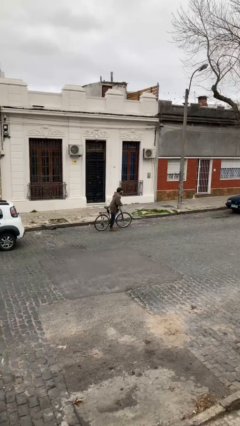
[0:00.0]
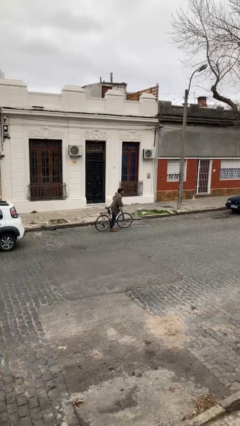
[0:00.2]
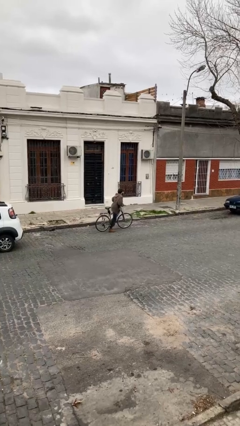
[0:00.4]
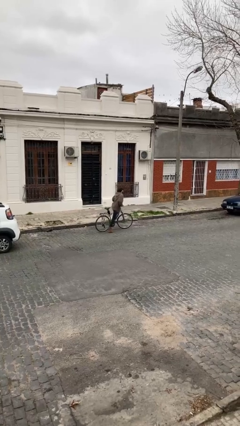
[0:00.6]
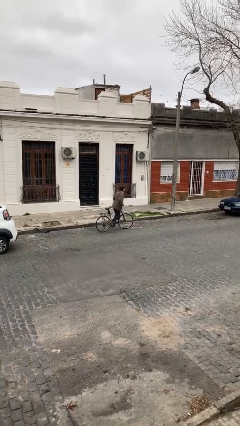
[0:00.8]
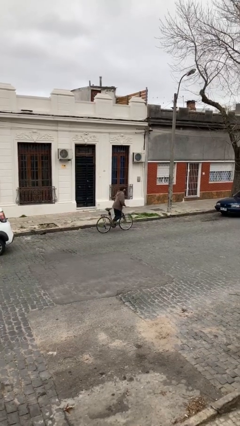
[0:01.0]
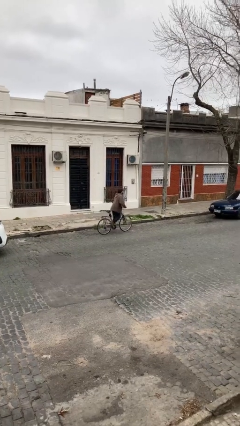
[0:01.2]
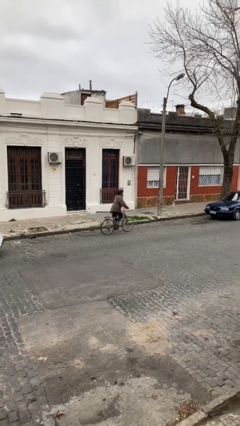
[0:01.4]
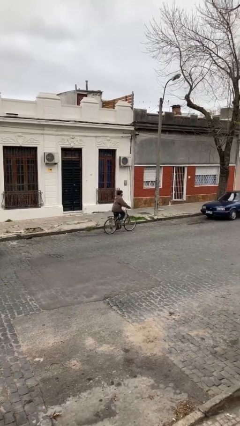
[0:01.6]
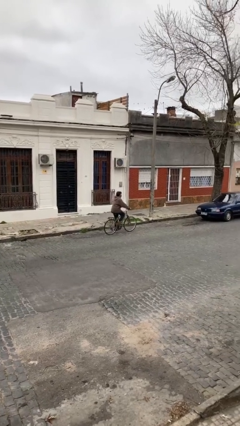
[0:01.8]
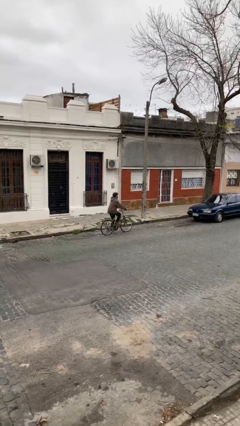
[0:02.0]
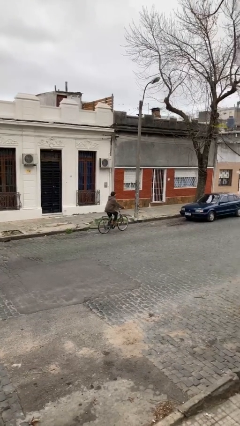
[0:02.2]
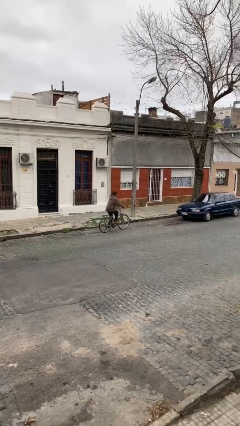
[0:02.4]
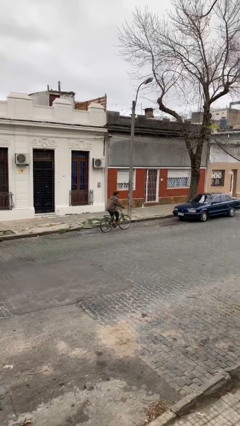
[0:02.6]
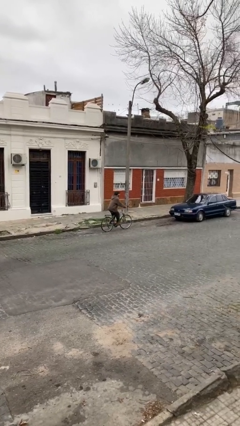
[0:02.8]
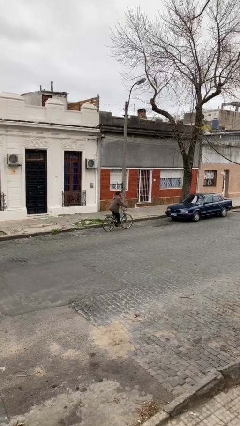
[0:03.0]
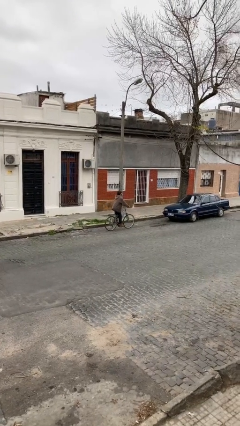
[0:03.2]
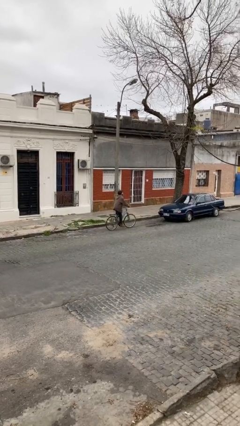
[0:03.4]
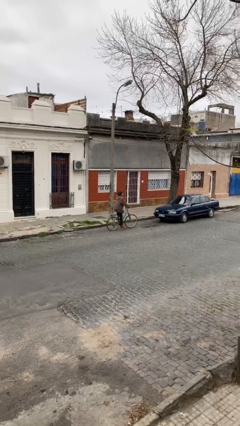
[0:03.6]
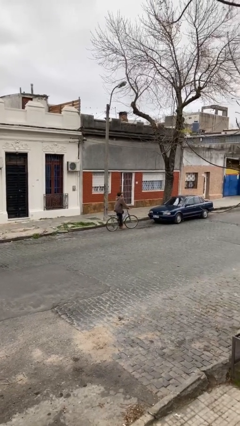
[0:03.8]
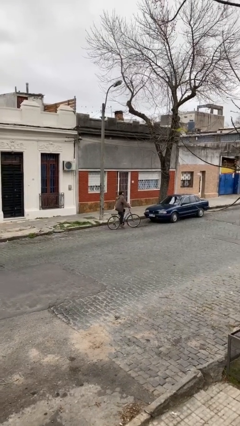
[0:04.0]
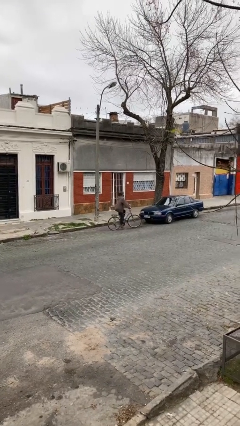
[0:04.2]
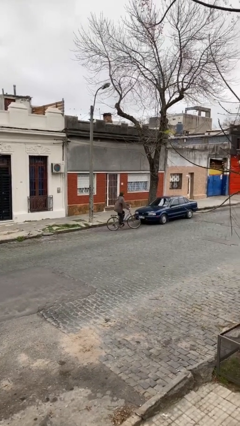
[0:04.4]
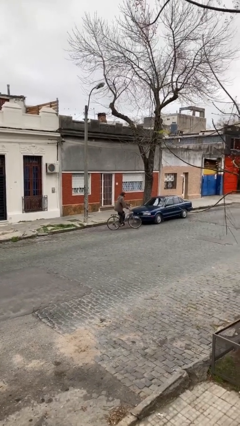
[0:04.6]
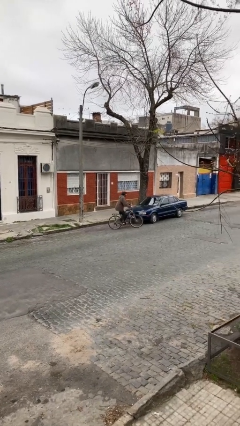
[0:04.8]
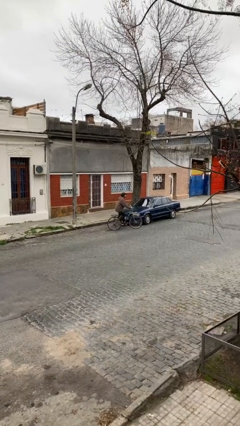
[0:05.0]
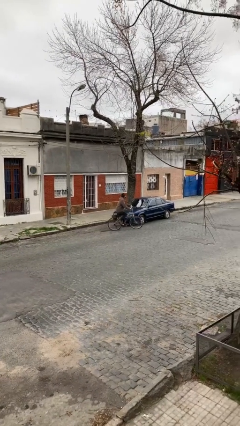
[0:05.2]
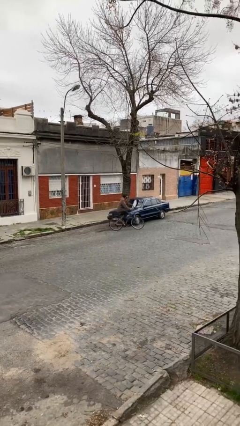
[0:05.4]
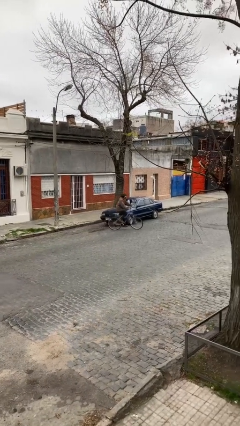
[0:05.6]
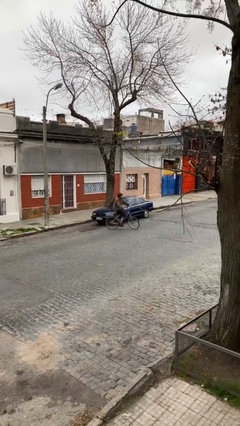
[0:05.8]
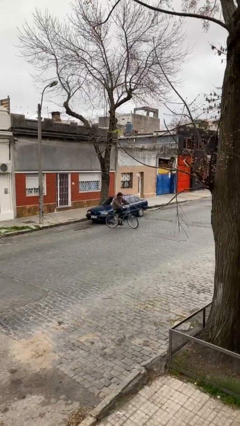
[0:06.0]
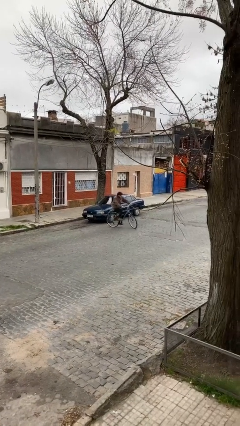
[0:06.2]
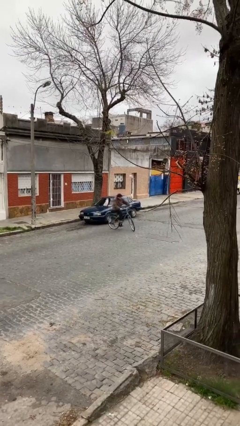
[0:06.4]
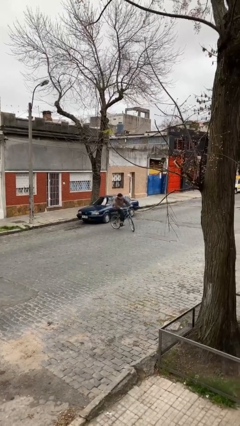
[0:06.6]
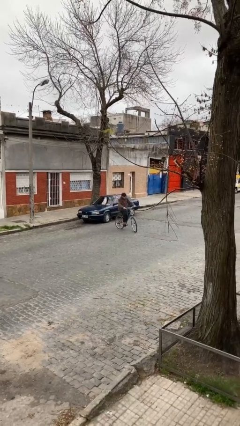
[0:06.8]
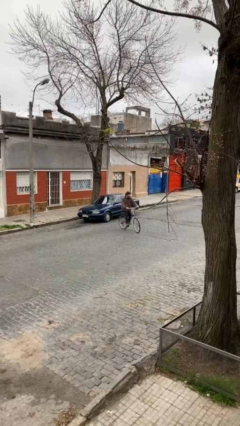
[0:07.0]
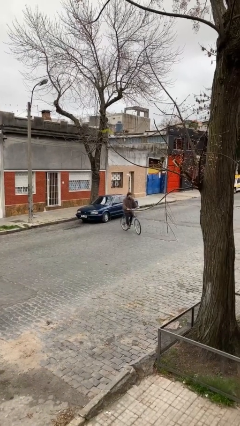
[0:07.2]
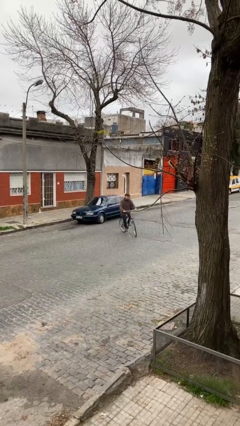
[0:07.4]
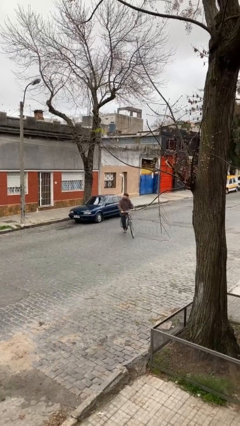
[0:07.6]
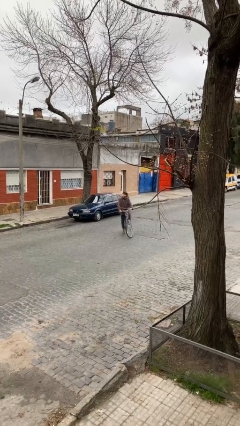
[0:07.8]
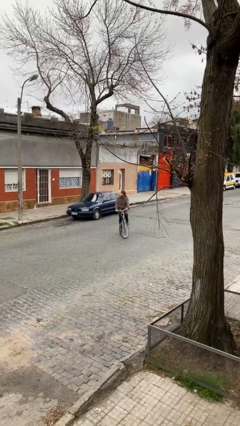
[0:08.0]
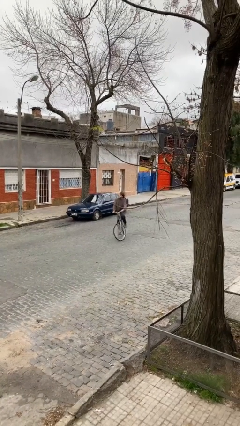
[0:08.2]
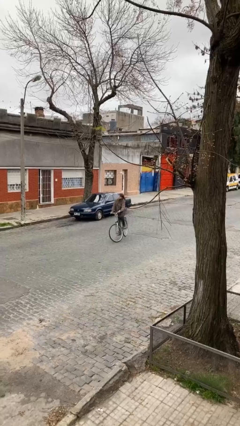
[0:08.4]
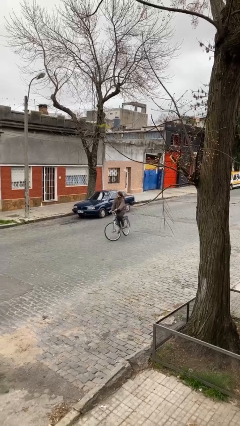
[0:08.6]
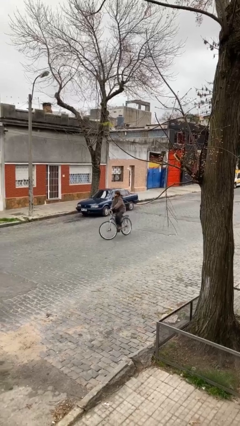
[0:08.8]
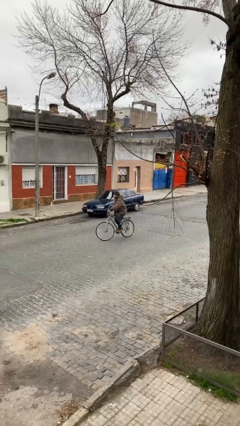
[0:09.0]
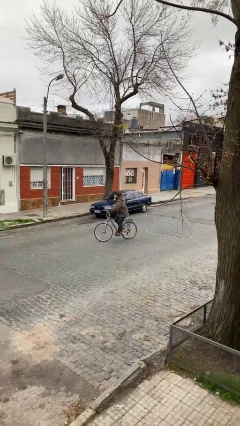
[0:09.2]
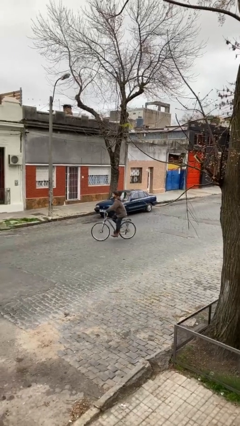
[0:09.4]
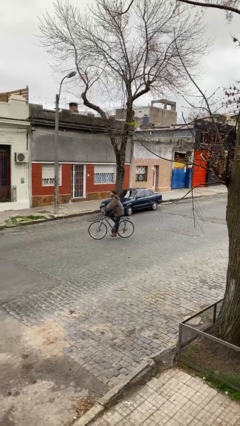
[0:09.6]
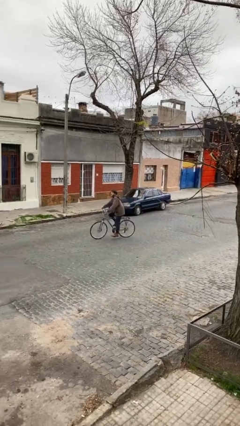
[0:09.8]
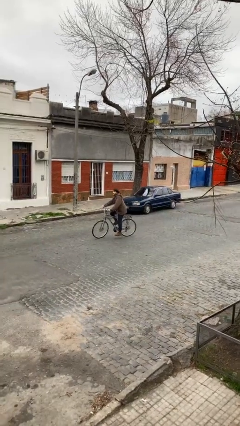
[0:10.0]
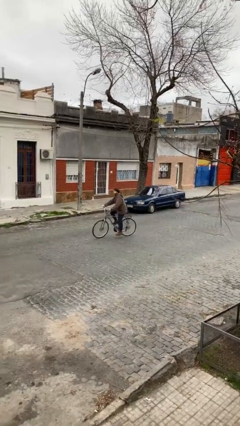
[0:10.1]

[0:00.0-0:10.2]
person rides bicycle

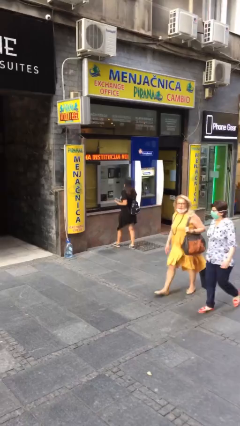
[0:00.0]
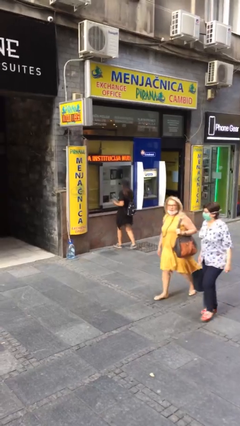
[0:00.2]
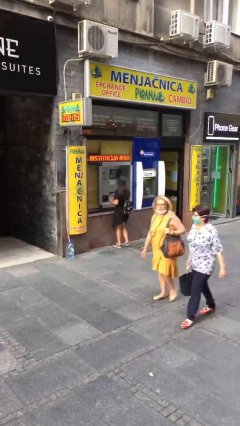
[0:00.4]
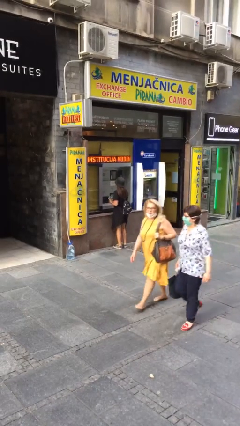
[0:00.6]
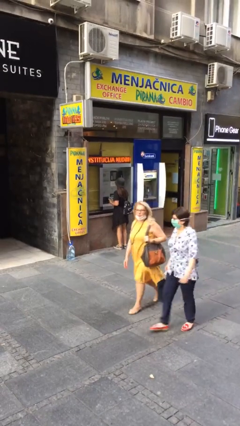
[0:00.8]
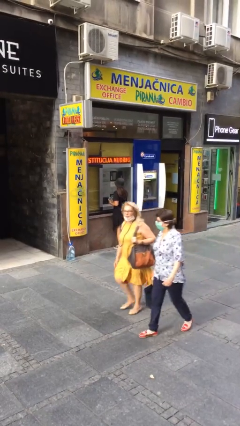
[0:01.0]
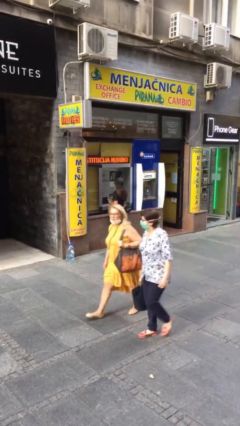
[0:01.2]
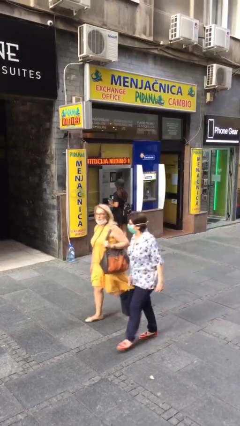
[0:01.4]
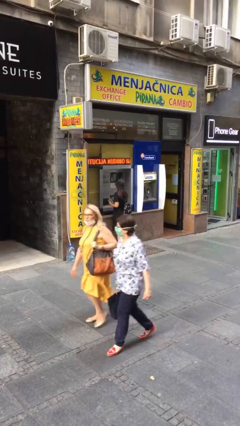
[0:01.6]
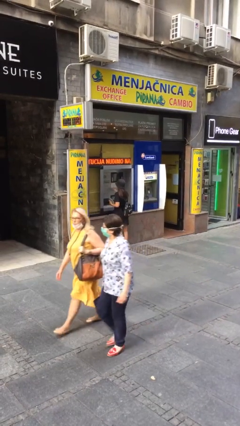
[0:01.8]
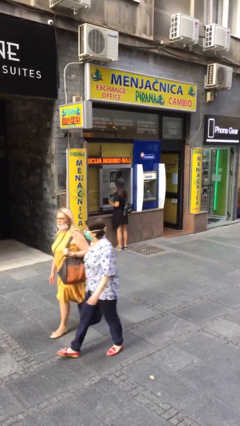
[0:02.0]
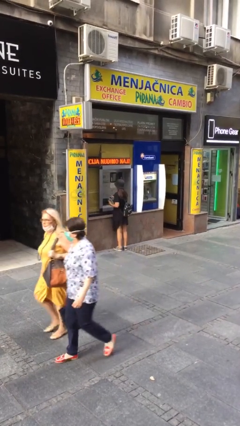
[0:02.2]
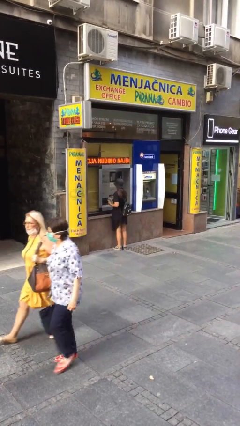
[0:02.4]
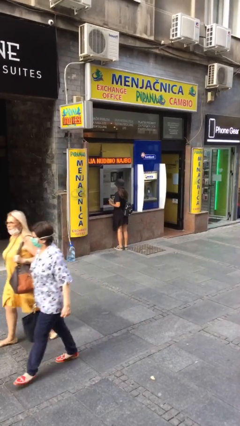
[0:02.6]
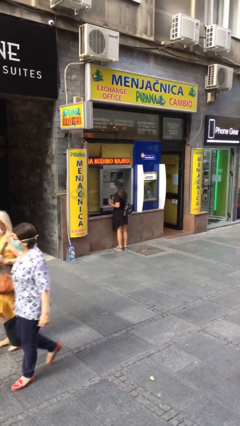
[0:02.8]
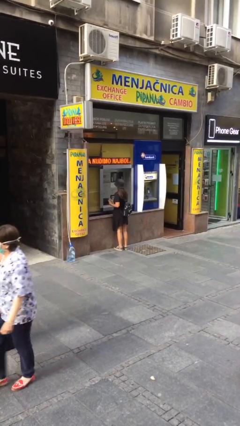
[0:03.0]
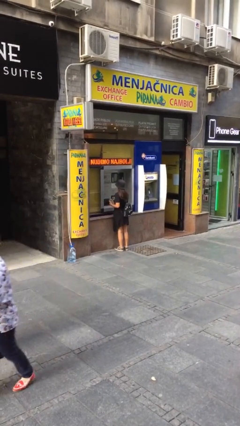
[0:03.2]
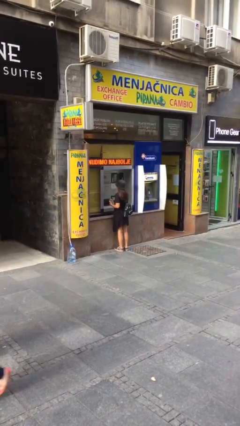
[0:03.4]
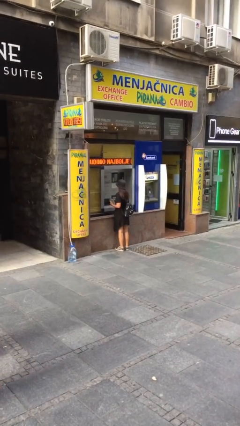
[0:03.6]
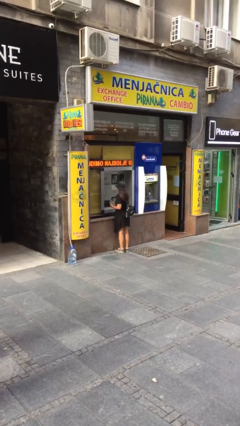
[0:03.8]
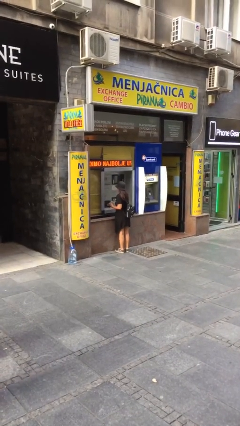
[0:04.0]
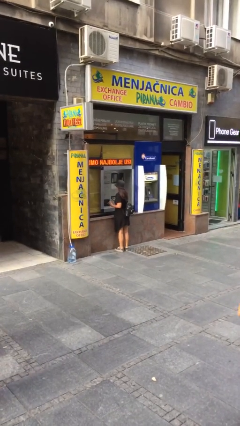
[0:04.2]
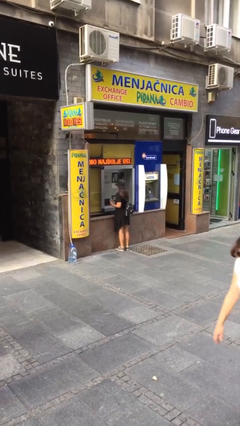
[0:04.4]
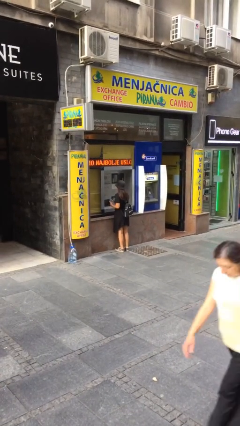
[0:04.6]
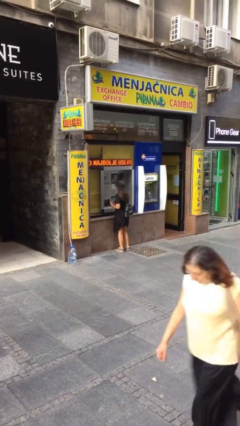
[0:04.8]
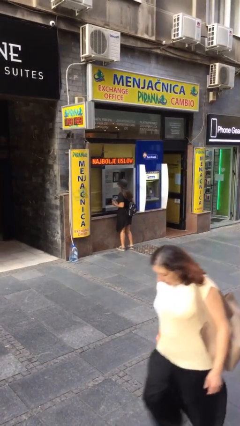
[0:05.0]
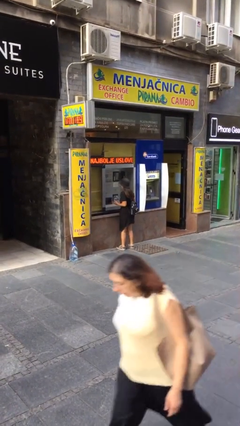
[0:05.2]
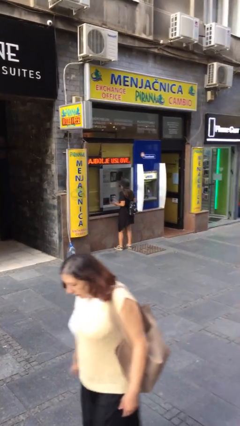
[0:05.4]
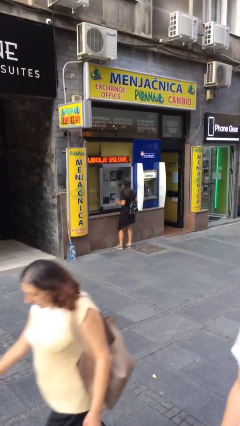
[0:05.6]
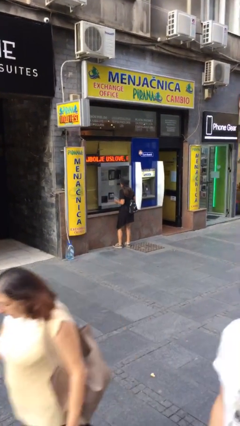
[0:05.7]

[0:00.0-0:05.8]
person purchases from machine

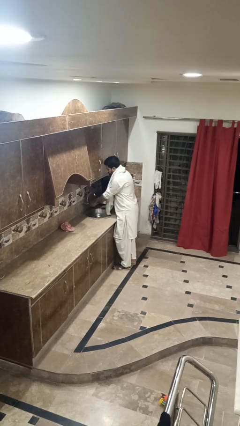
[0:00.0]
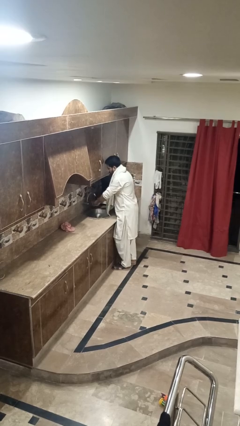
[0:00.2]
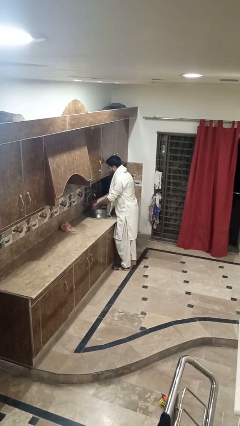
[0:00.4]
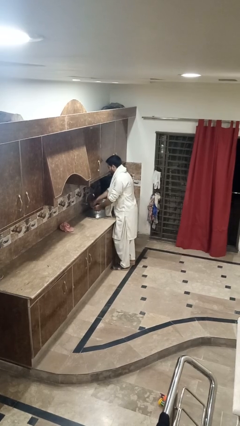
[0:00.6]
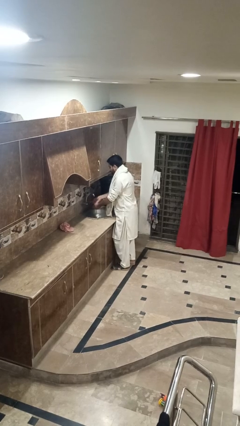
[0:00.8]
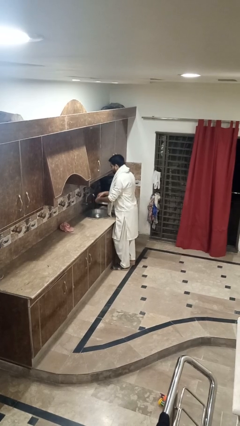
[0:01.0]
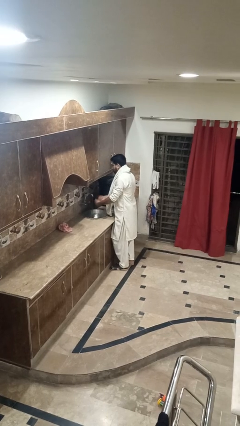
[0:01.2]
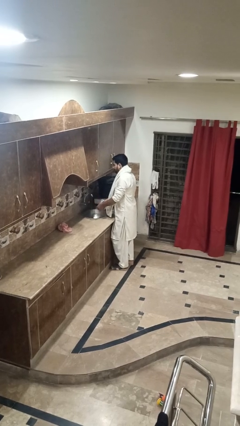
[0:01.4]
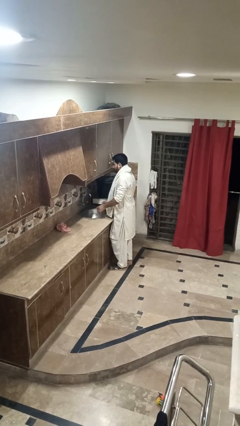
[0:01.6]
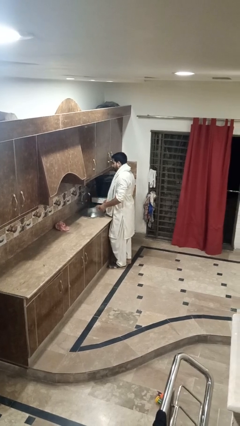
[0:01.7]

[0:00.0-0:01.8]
person washes hands

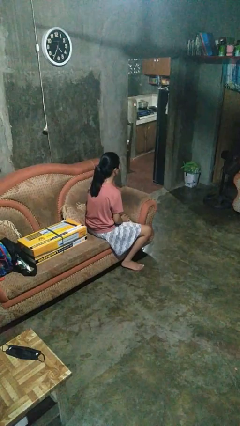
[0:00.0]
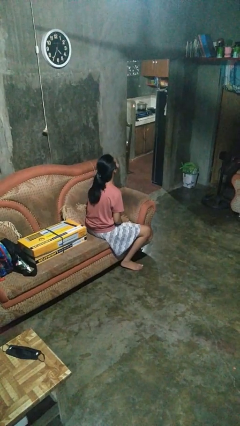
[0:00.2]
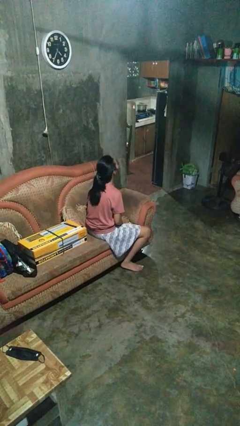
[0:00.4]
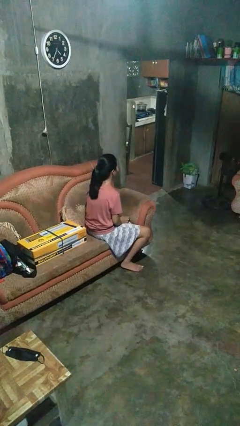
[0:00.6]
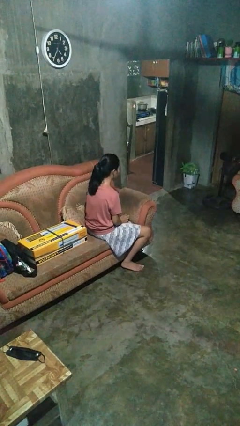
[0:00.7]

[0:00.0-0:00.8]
person nods head
